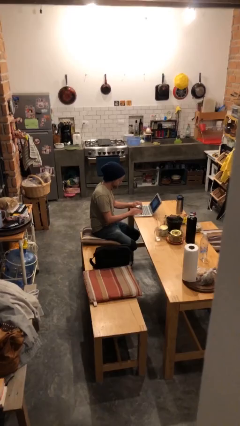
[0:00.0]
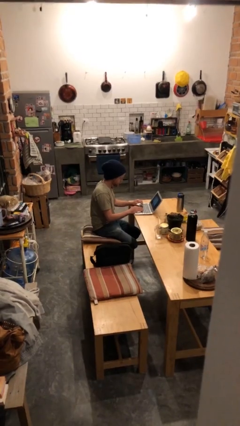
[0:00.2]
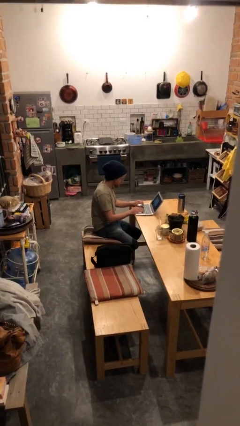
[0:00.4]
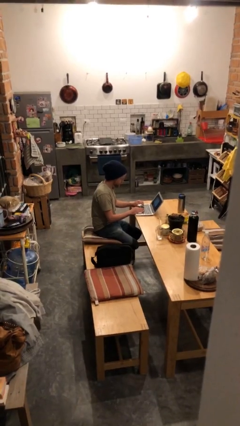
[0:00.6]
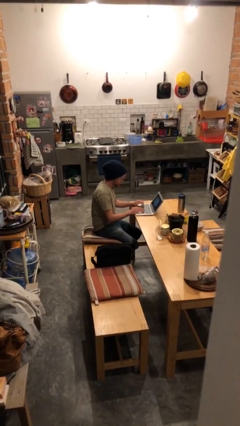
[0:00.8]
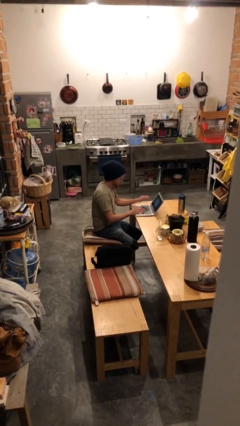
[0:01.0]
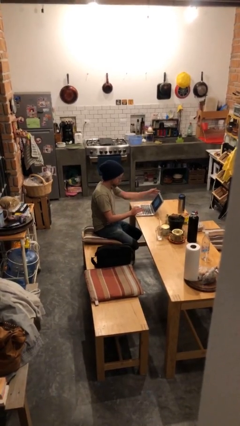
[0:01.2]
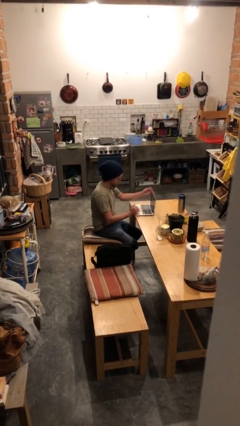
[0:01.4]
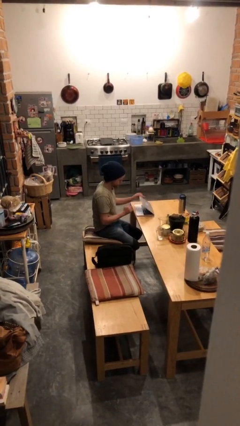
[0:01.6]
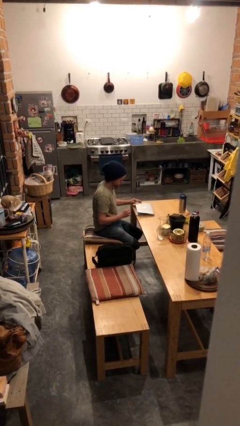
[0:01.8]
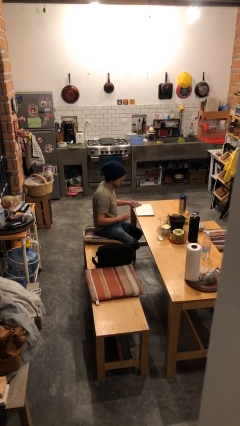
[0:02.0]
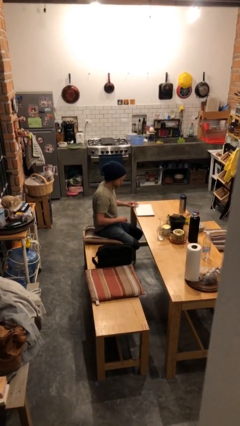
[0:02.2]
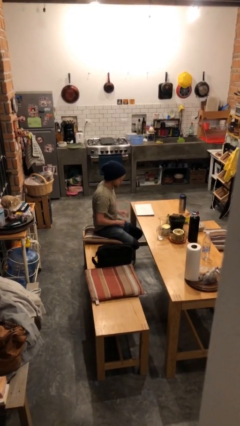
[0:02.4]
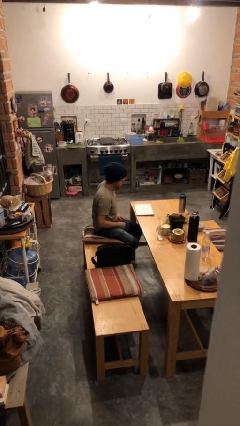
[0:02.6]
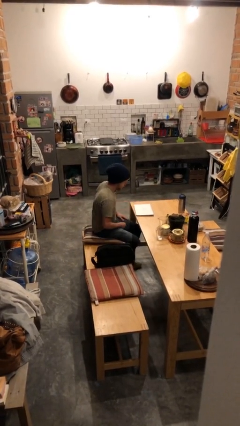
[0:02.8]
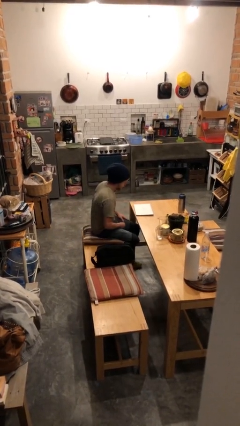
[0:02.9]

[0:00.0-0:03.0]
person interacts with laptop

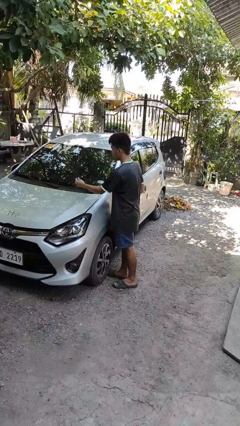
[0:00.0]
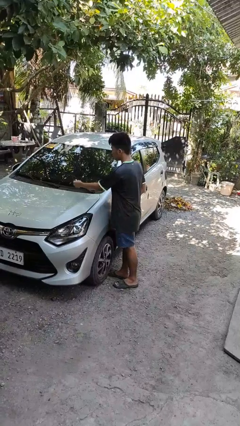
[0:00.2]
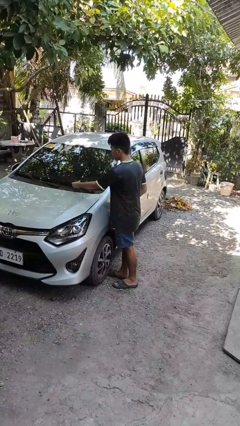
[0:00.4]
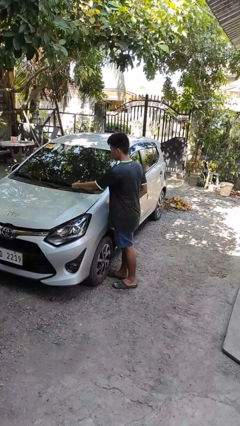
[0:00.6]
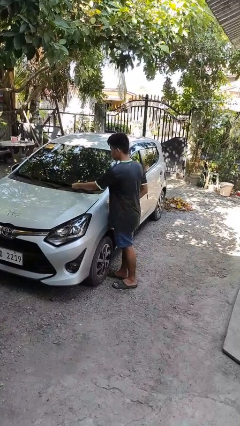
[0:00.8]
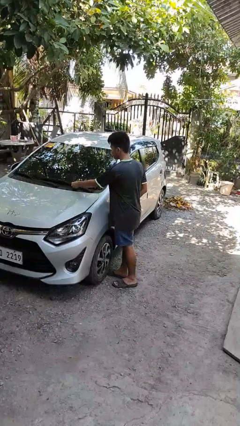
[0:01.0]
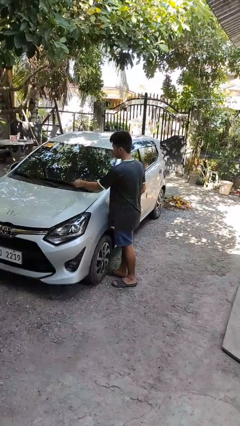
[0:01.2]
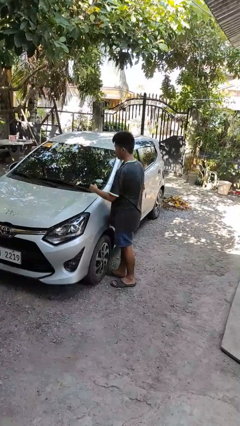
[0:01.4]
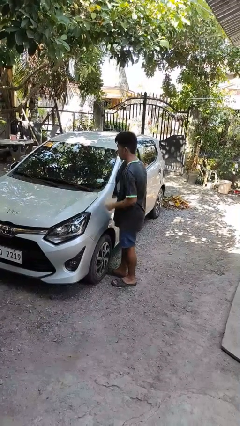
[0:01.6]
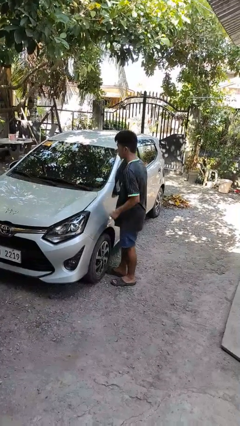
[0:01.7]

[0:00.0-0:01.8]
person flips down car wipers

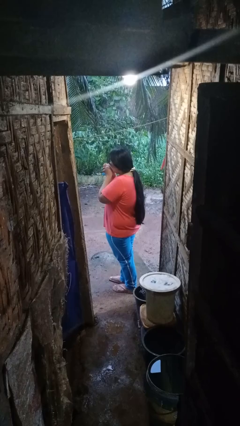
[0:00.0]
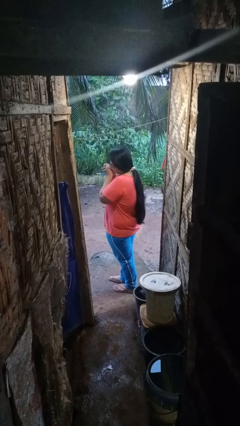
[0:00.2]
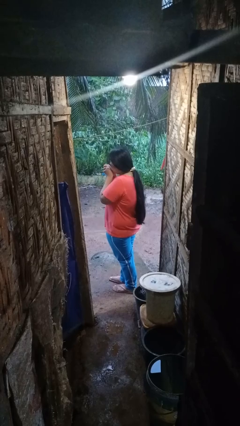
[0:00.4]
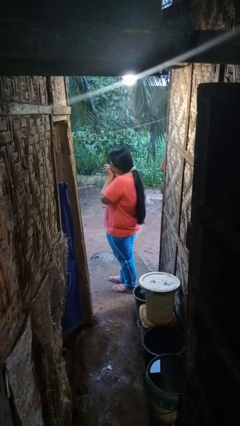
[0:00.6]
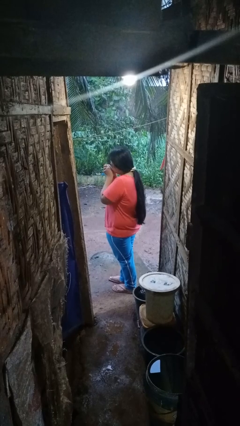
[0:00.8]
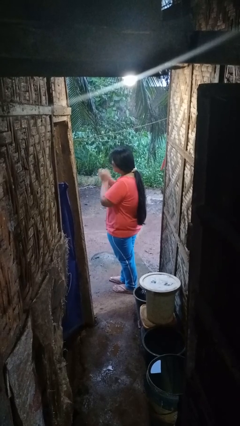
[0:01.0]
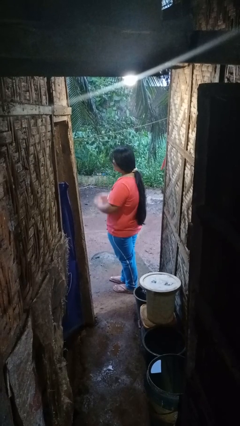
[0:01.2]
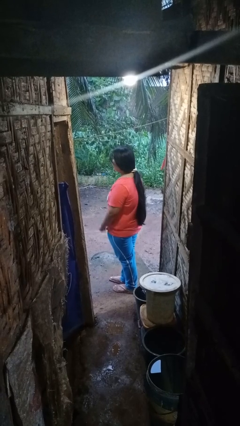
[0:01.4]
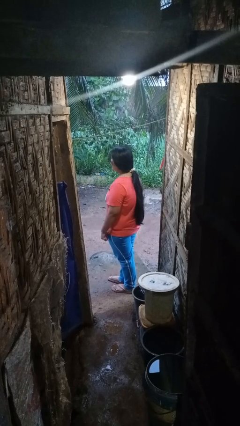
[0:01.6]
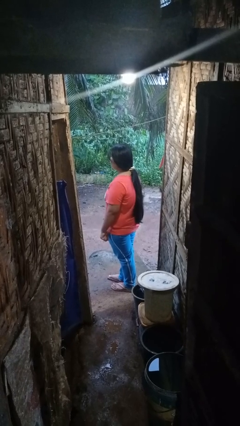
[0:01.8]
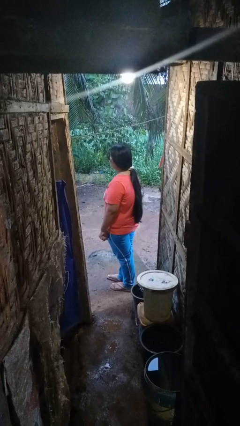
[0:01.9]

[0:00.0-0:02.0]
person blows into hands

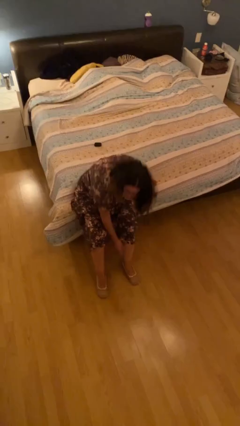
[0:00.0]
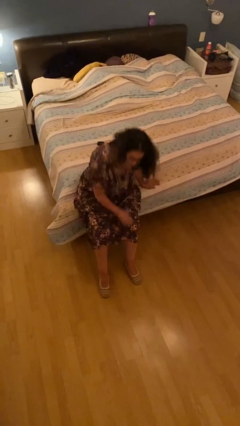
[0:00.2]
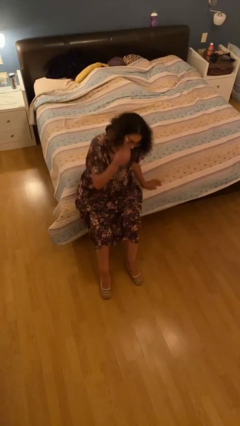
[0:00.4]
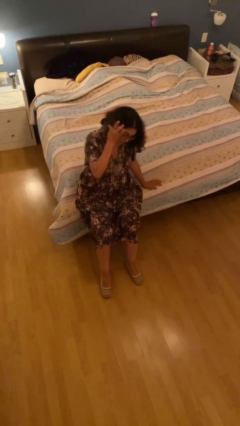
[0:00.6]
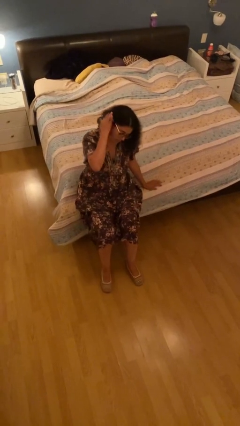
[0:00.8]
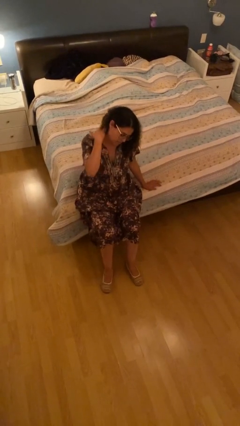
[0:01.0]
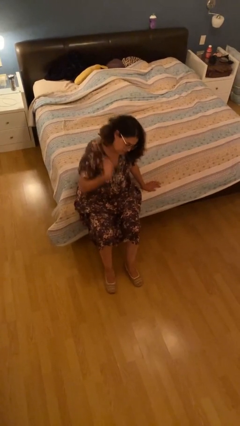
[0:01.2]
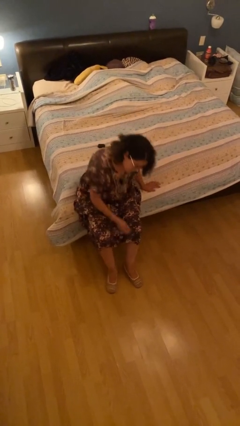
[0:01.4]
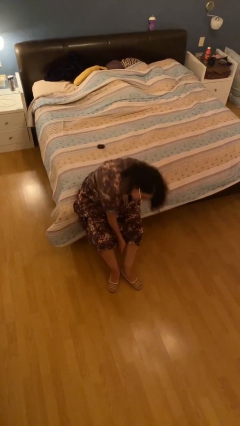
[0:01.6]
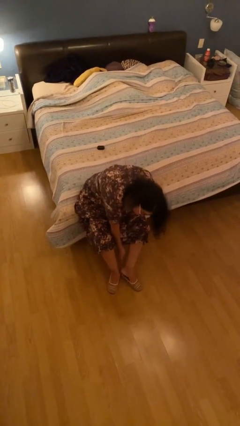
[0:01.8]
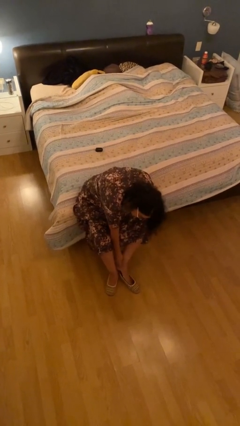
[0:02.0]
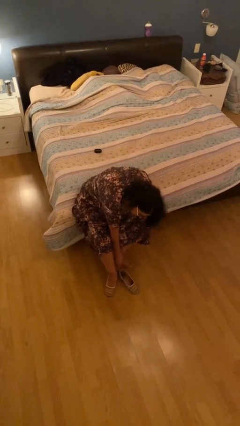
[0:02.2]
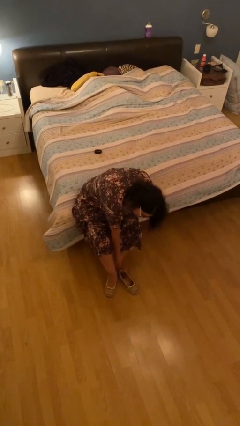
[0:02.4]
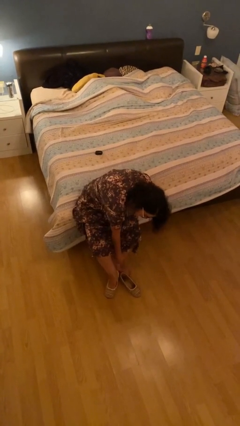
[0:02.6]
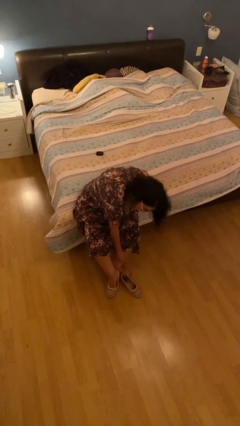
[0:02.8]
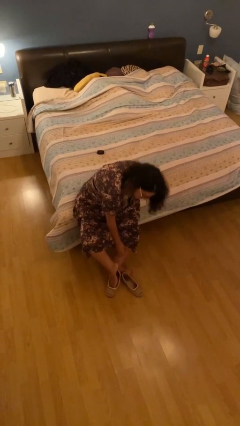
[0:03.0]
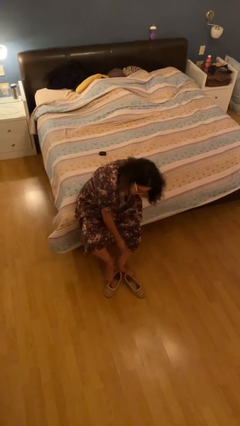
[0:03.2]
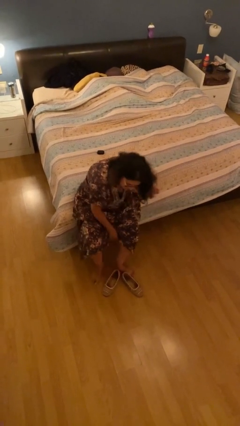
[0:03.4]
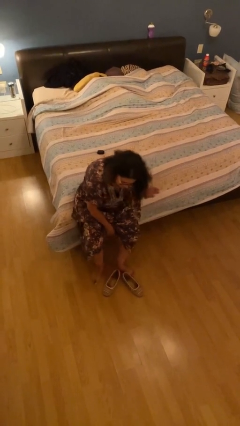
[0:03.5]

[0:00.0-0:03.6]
person takes off shoes

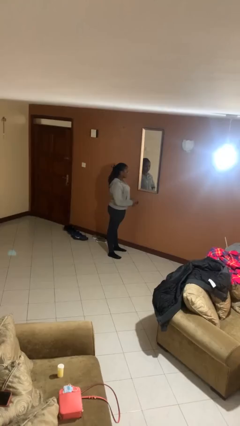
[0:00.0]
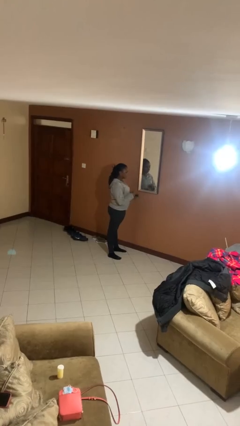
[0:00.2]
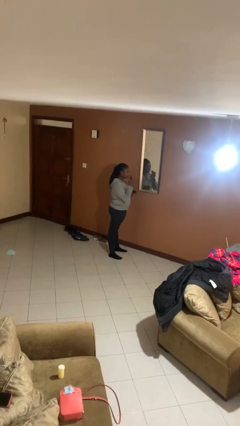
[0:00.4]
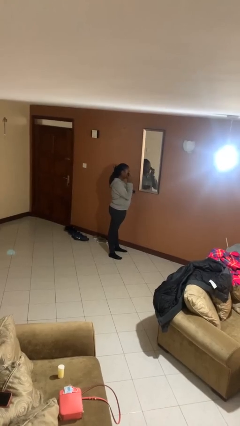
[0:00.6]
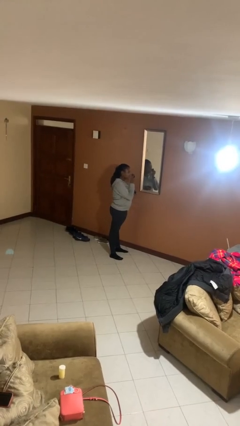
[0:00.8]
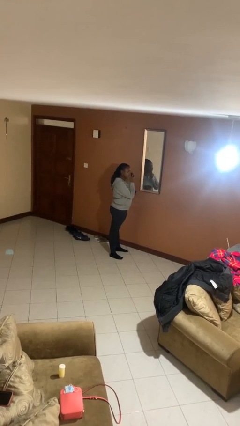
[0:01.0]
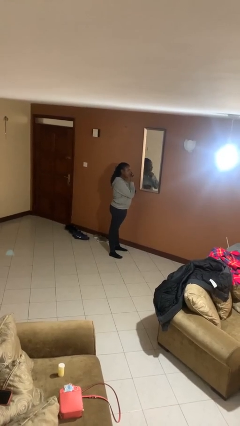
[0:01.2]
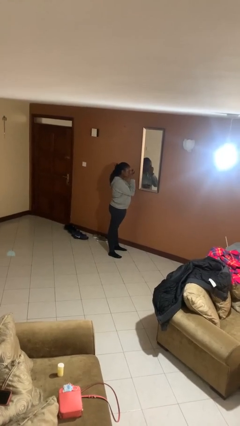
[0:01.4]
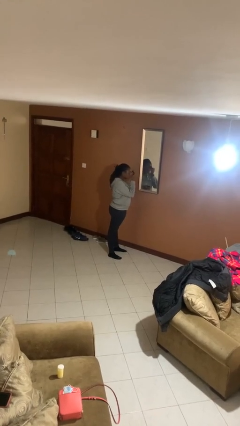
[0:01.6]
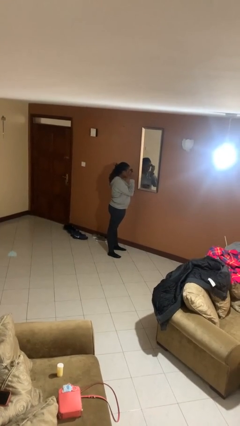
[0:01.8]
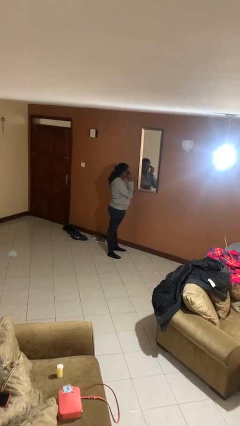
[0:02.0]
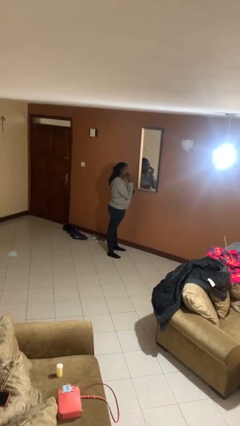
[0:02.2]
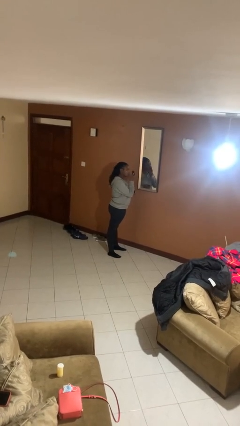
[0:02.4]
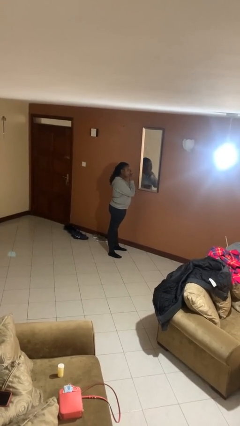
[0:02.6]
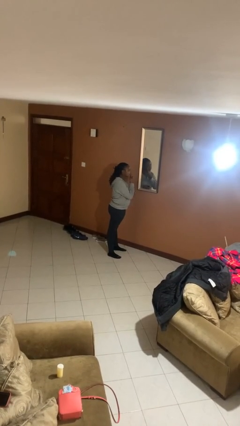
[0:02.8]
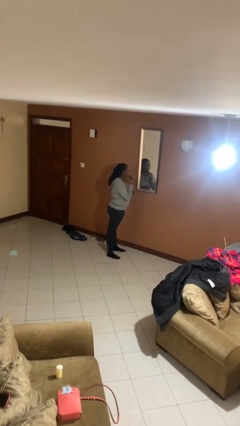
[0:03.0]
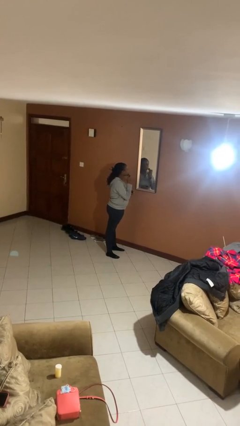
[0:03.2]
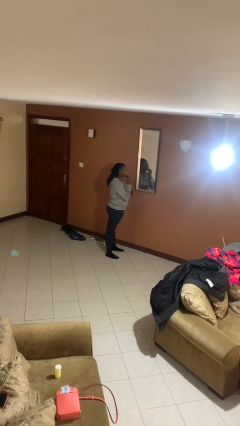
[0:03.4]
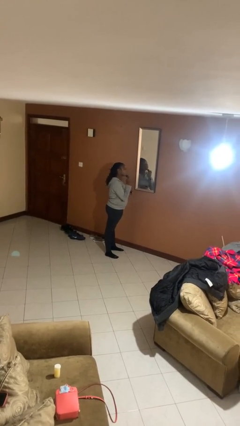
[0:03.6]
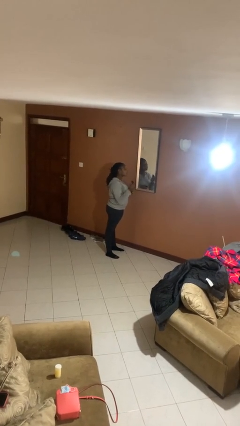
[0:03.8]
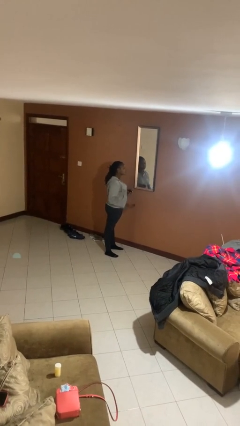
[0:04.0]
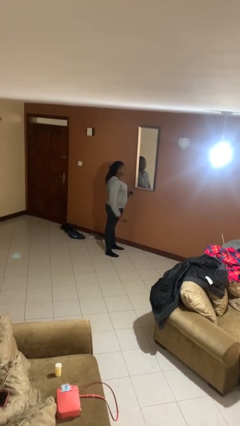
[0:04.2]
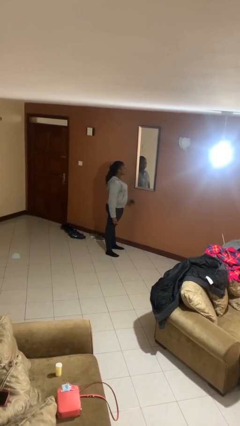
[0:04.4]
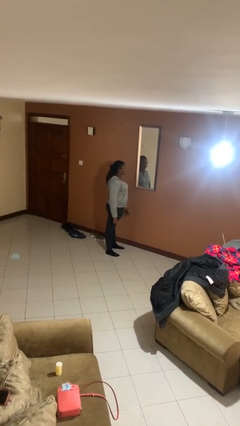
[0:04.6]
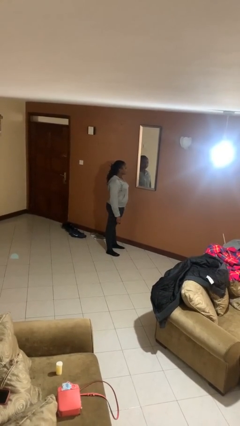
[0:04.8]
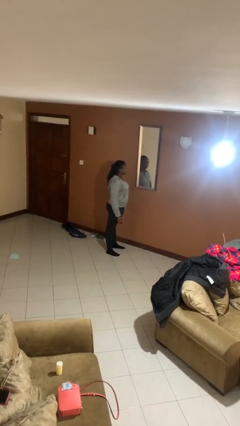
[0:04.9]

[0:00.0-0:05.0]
person applies foundation makeup

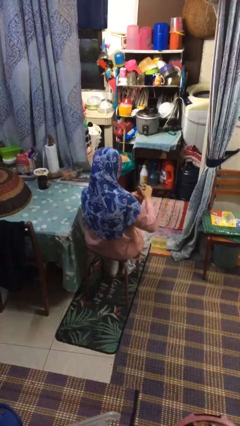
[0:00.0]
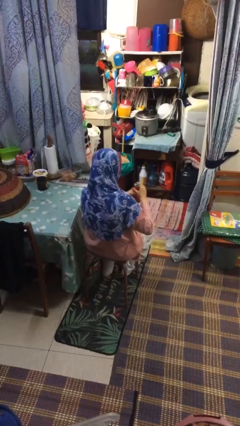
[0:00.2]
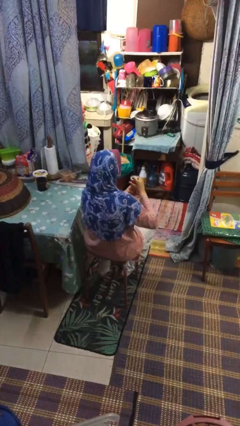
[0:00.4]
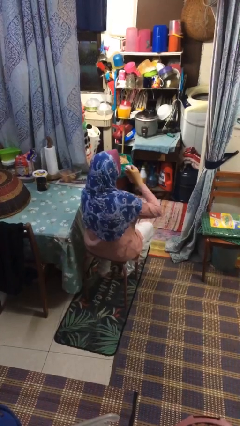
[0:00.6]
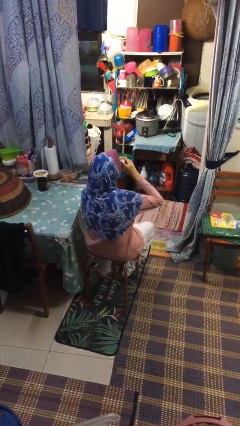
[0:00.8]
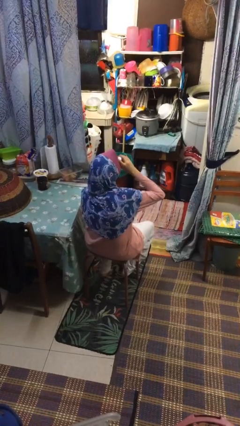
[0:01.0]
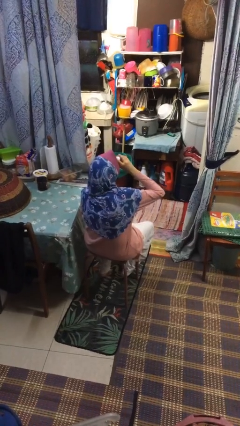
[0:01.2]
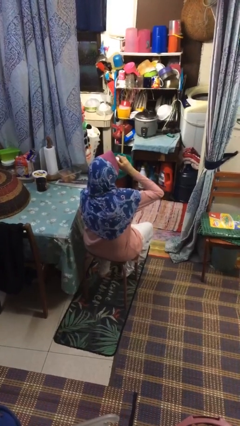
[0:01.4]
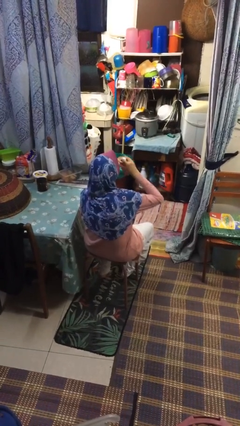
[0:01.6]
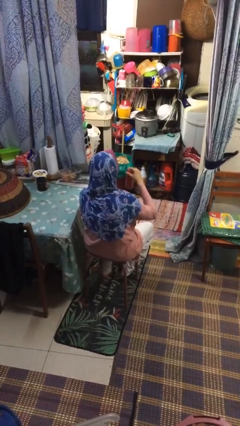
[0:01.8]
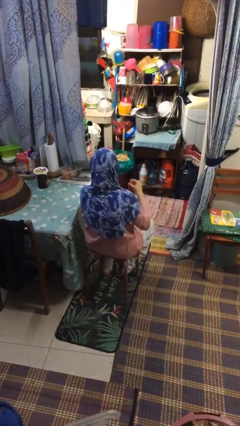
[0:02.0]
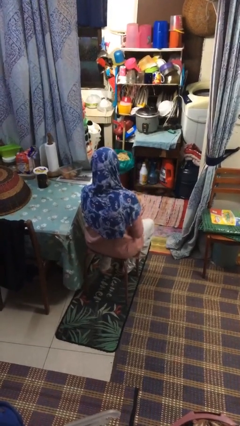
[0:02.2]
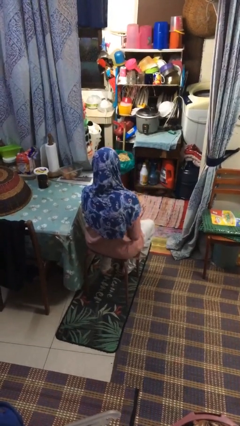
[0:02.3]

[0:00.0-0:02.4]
person drinks from beverage can
